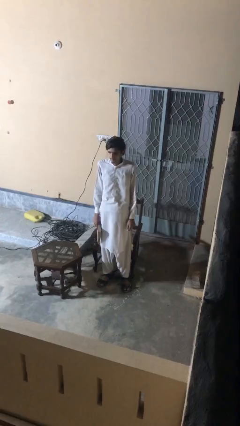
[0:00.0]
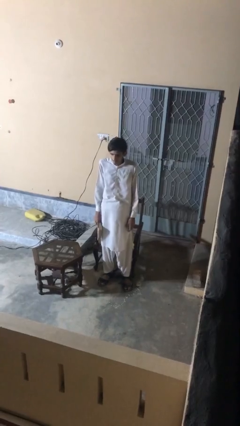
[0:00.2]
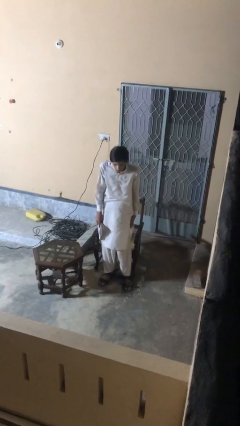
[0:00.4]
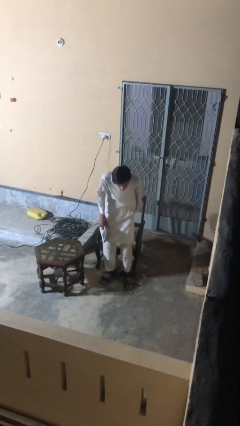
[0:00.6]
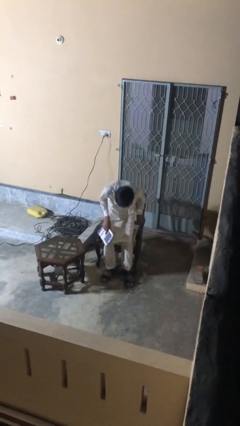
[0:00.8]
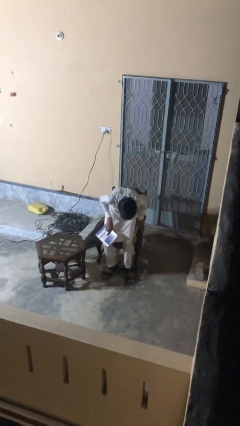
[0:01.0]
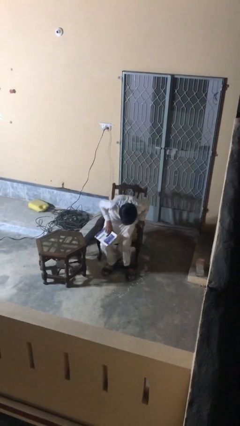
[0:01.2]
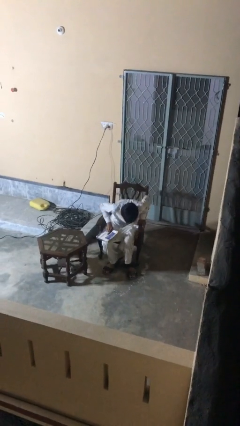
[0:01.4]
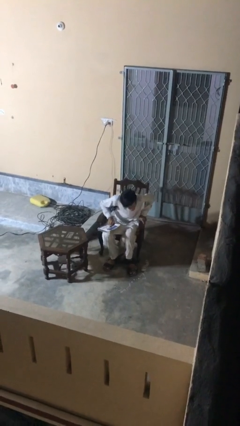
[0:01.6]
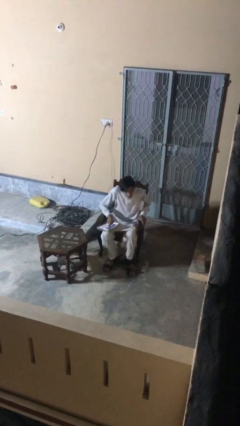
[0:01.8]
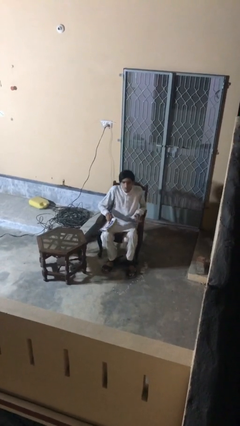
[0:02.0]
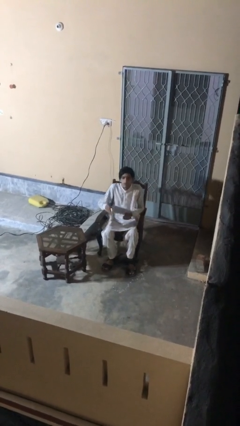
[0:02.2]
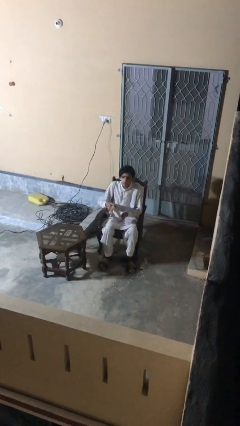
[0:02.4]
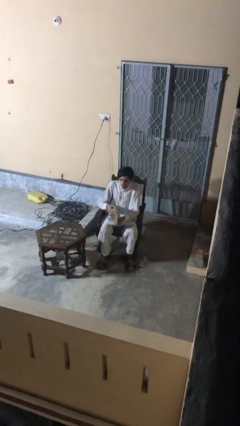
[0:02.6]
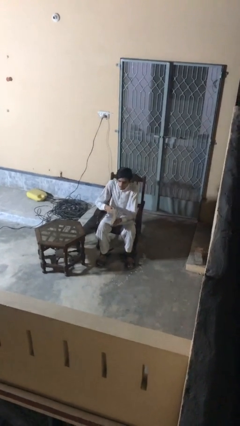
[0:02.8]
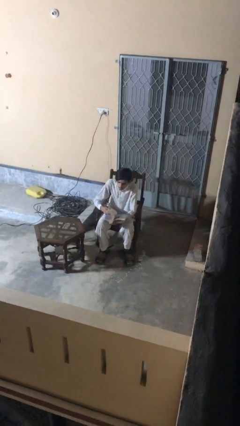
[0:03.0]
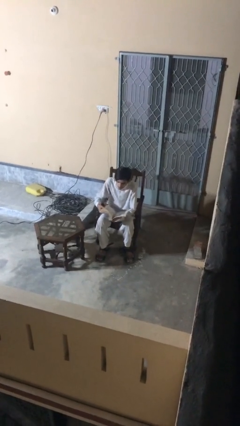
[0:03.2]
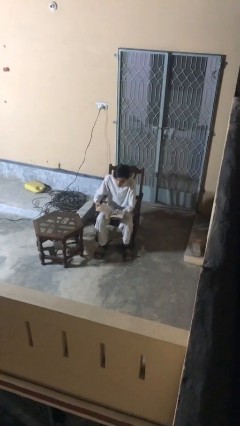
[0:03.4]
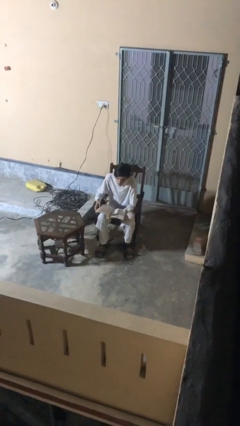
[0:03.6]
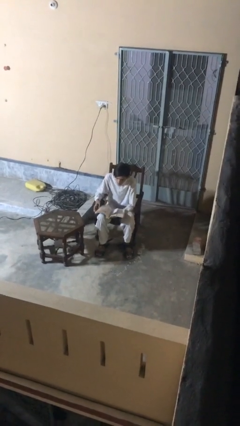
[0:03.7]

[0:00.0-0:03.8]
person sits down

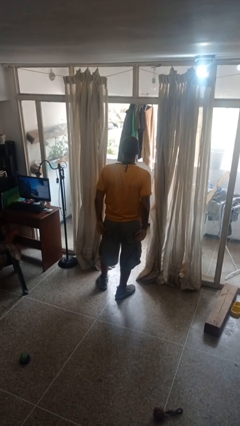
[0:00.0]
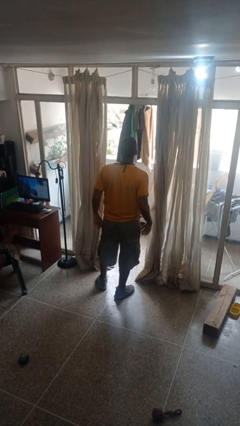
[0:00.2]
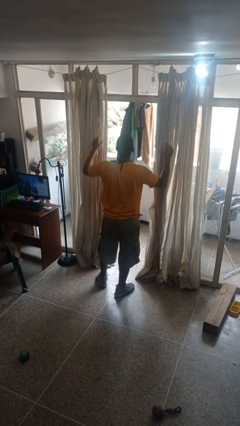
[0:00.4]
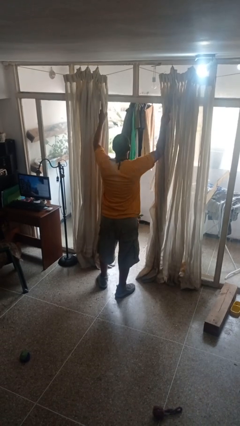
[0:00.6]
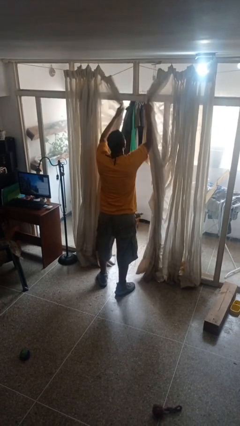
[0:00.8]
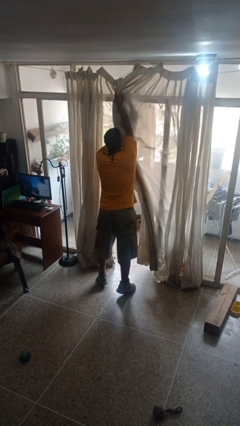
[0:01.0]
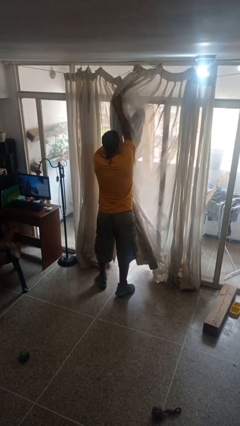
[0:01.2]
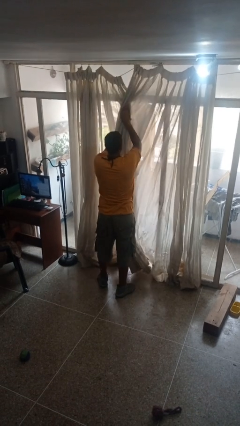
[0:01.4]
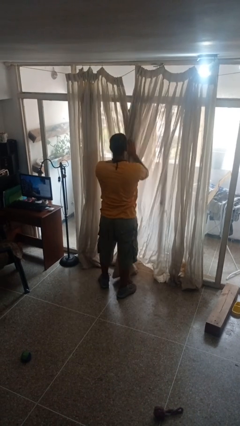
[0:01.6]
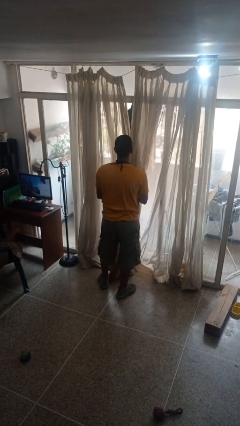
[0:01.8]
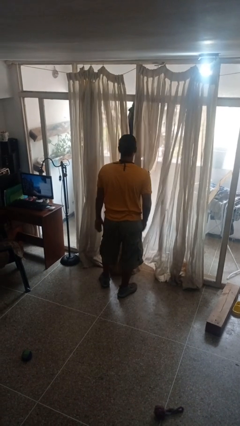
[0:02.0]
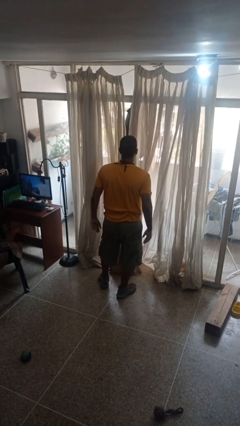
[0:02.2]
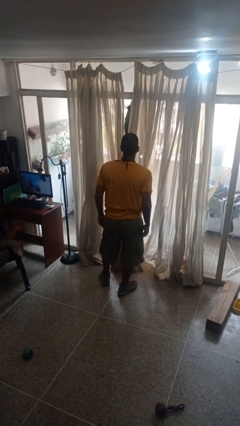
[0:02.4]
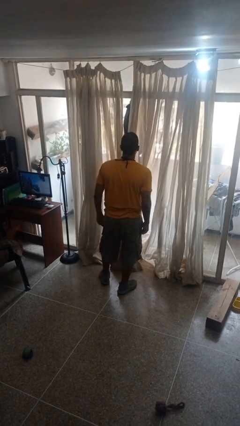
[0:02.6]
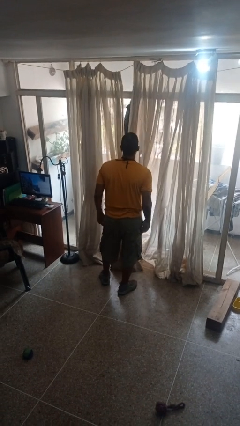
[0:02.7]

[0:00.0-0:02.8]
person closes curtains

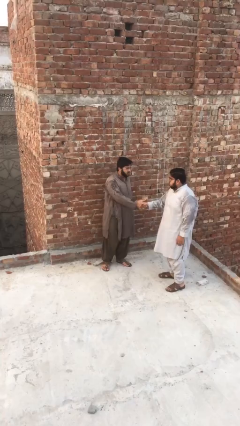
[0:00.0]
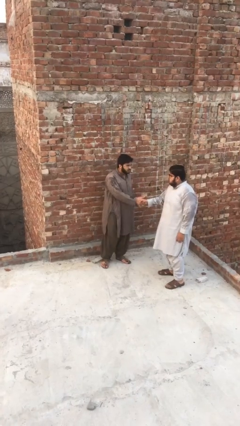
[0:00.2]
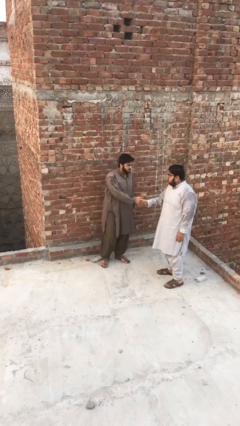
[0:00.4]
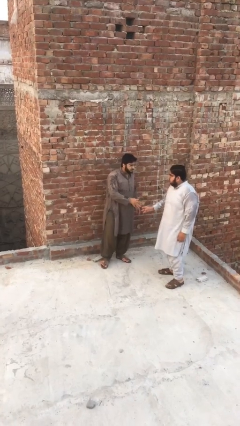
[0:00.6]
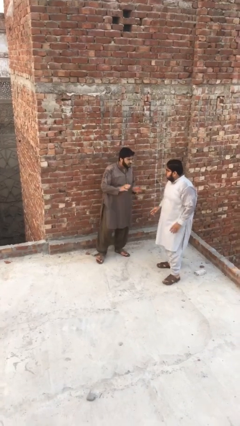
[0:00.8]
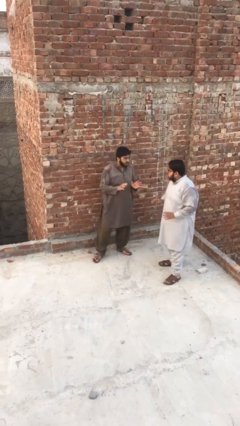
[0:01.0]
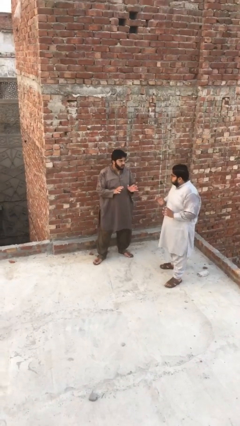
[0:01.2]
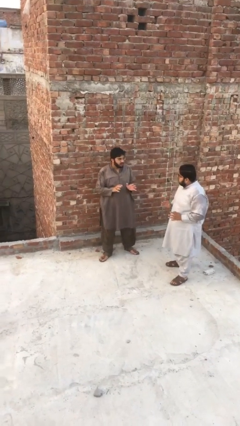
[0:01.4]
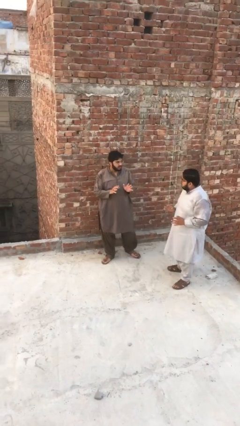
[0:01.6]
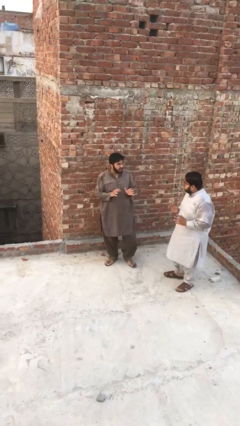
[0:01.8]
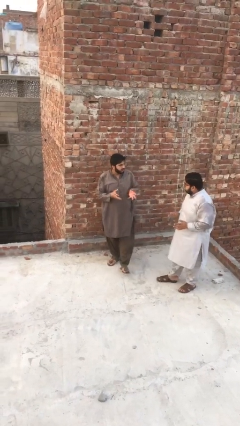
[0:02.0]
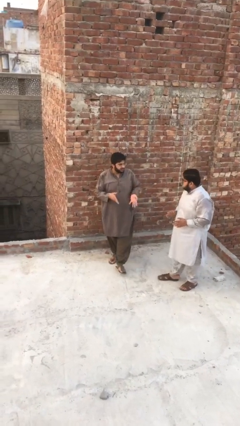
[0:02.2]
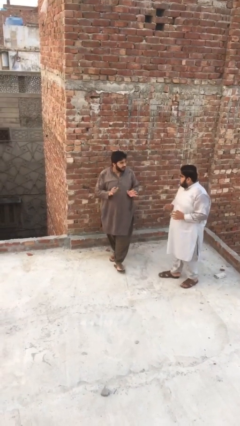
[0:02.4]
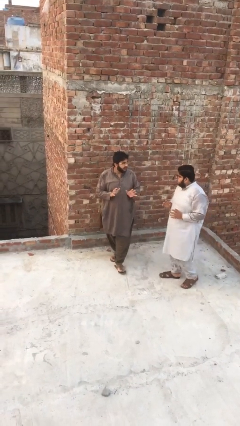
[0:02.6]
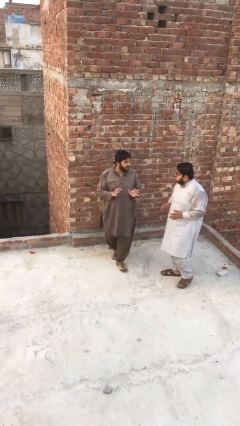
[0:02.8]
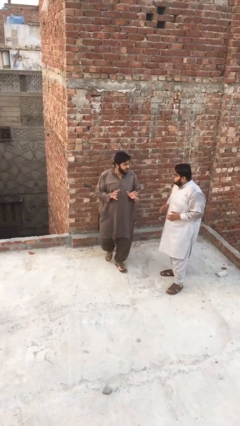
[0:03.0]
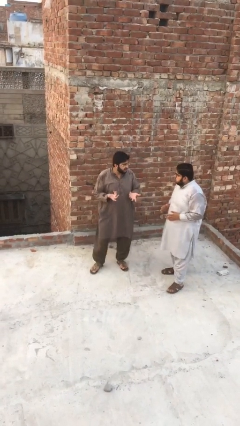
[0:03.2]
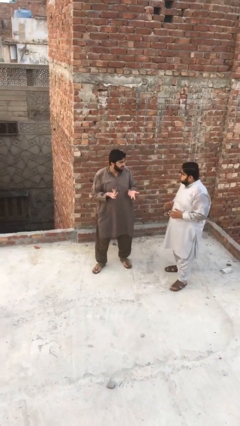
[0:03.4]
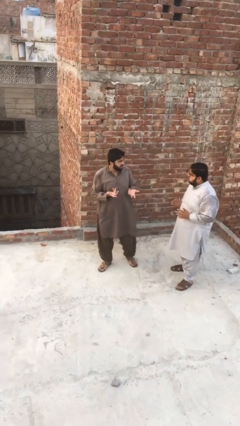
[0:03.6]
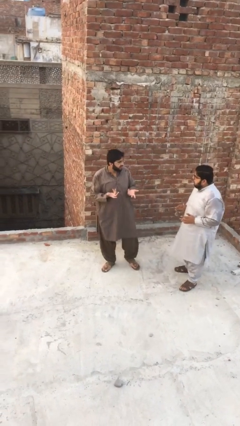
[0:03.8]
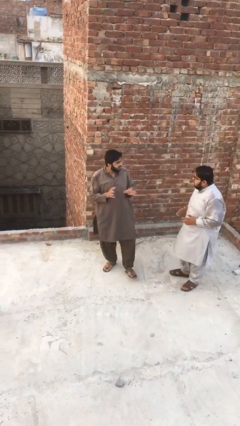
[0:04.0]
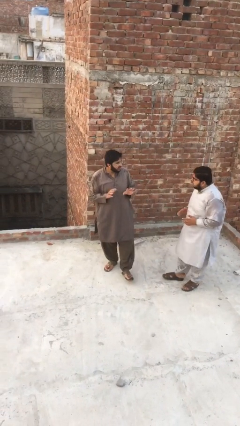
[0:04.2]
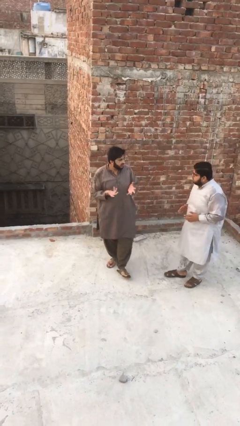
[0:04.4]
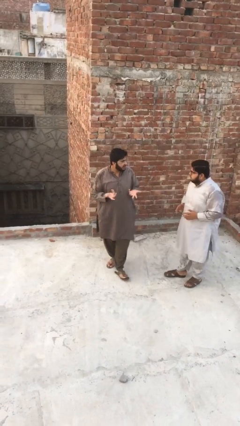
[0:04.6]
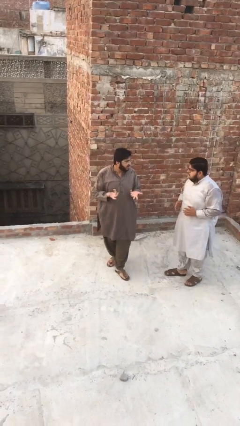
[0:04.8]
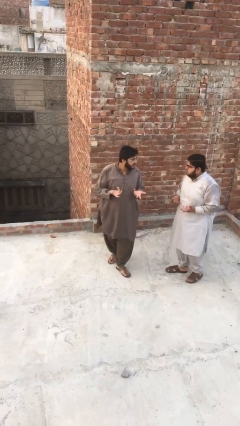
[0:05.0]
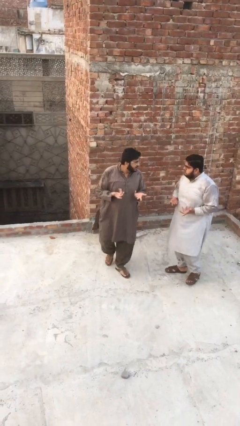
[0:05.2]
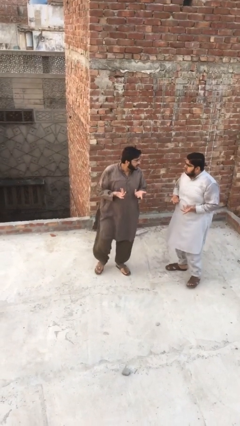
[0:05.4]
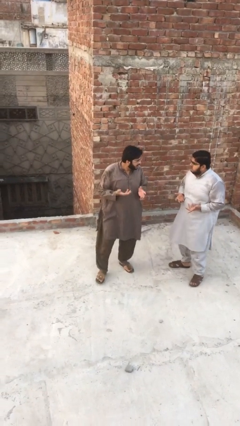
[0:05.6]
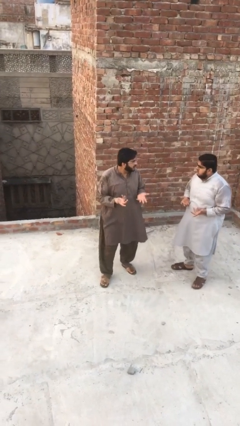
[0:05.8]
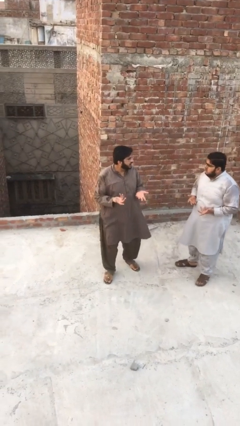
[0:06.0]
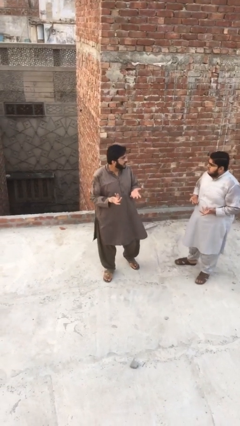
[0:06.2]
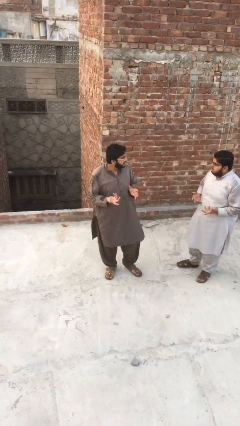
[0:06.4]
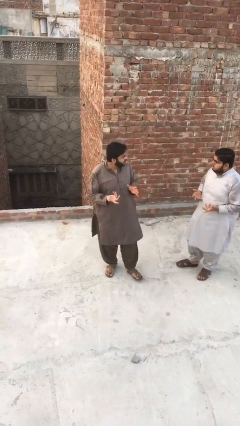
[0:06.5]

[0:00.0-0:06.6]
person talks to person

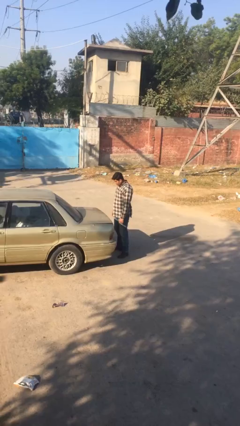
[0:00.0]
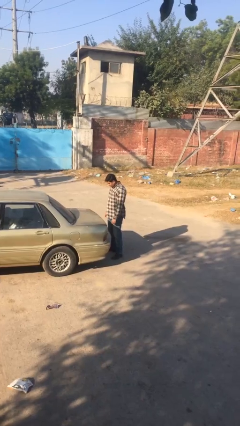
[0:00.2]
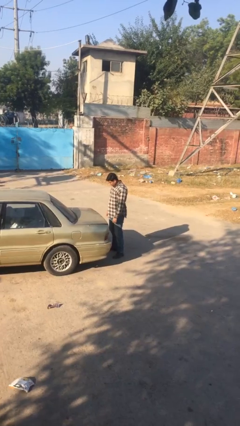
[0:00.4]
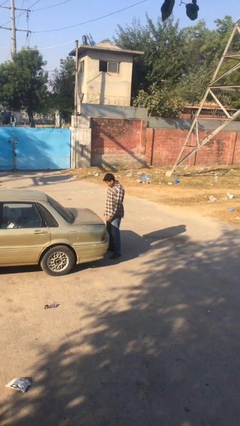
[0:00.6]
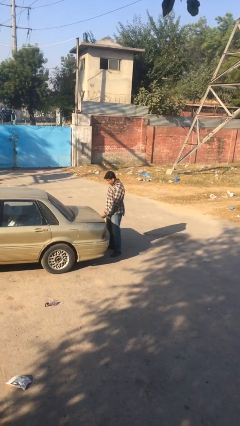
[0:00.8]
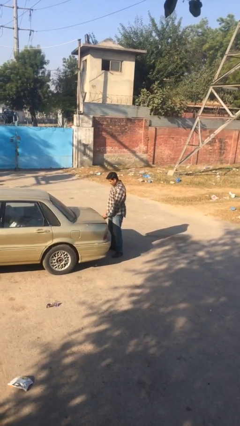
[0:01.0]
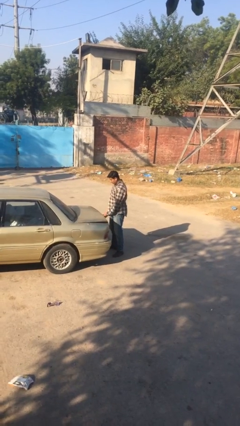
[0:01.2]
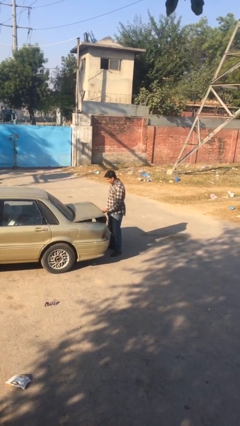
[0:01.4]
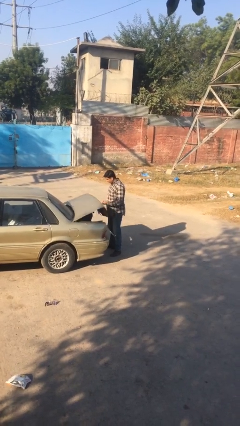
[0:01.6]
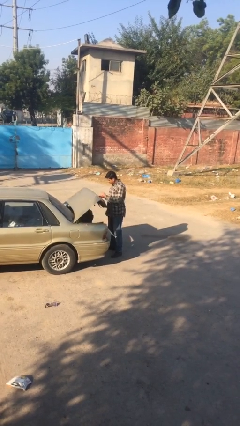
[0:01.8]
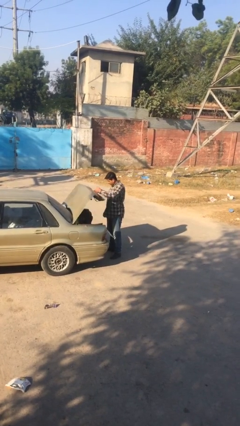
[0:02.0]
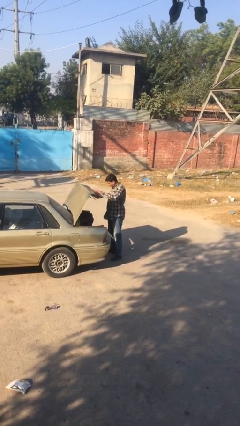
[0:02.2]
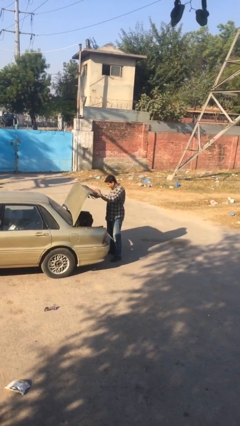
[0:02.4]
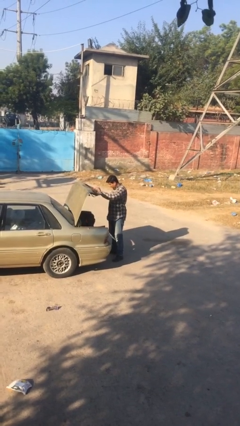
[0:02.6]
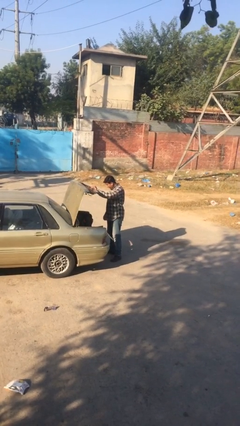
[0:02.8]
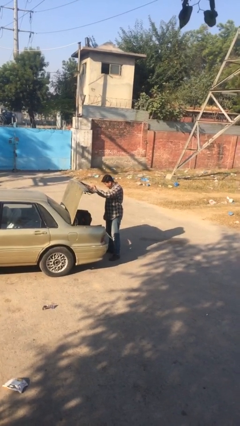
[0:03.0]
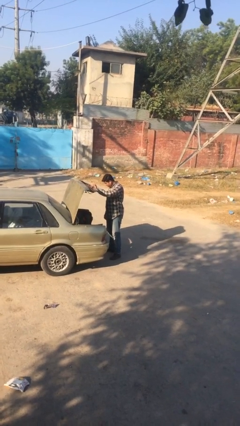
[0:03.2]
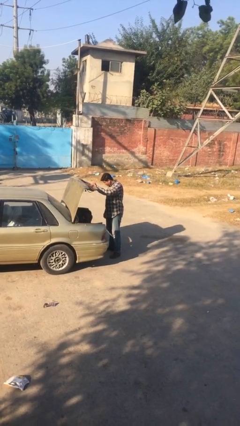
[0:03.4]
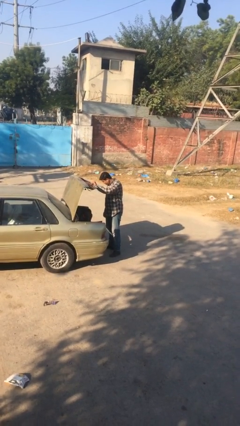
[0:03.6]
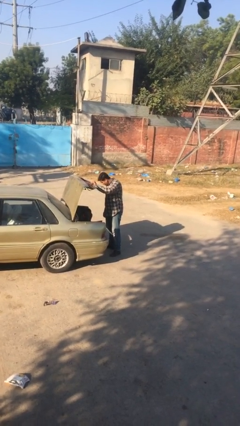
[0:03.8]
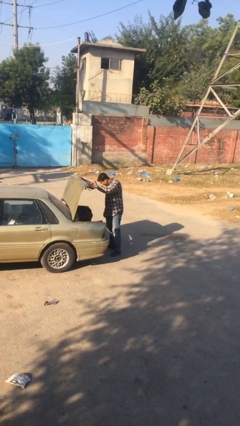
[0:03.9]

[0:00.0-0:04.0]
person opens car trunk

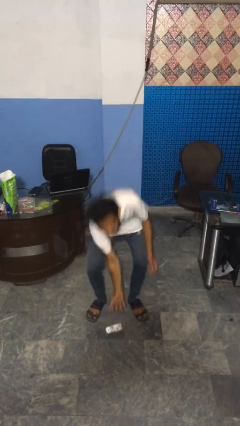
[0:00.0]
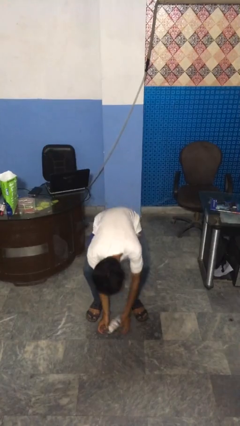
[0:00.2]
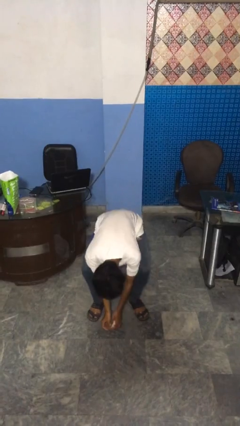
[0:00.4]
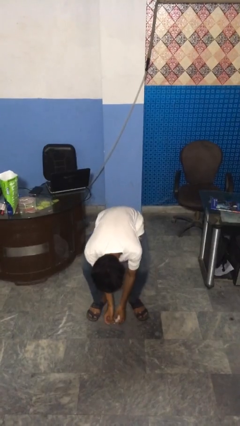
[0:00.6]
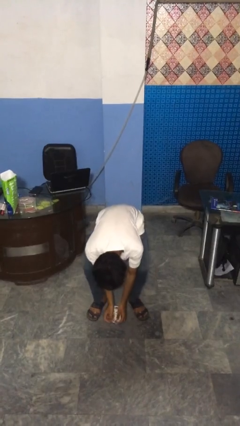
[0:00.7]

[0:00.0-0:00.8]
person catches dropped object
